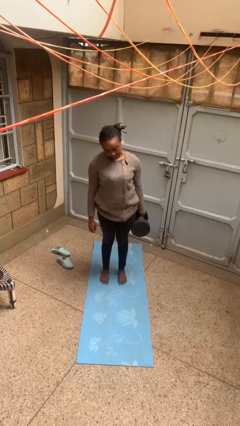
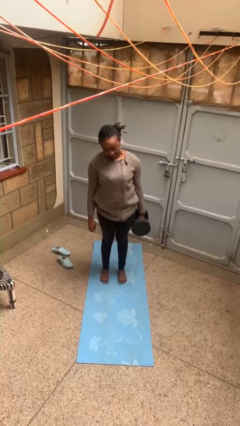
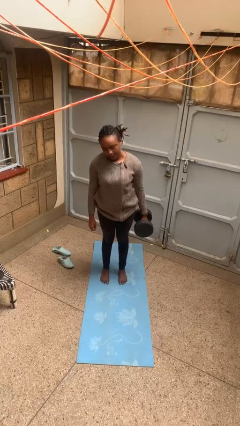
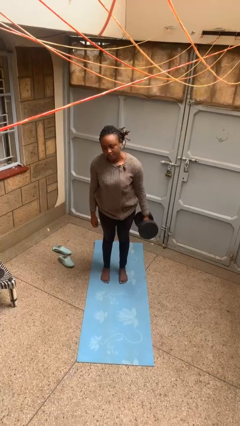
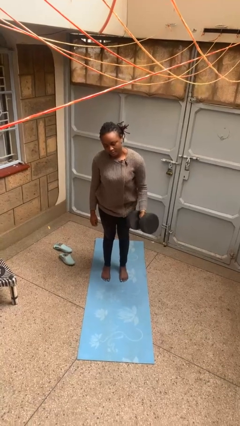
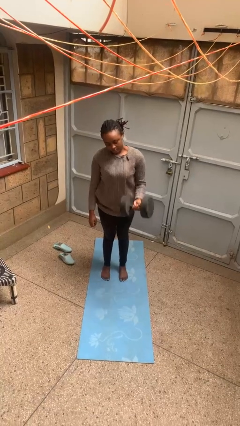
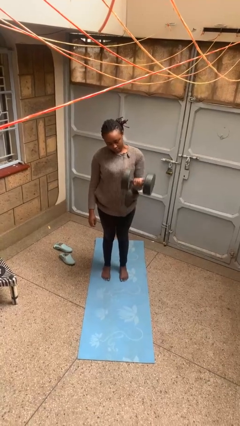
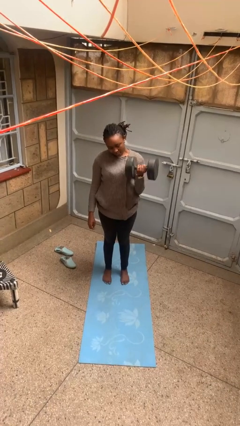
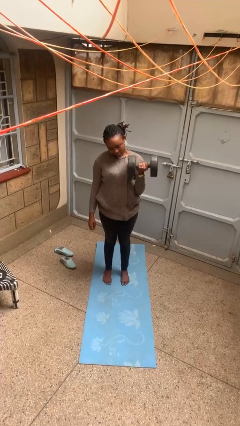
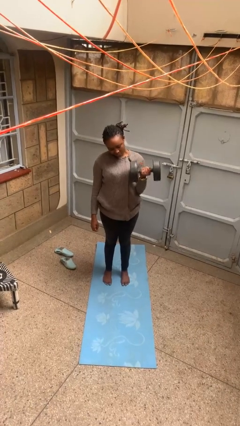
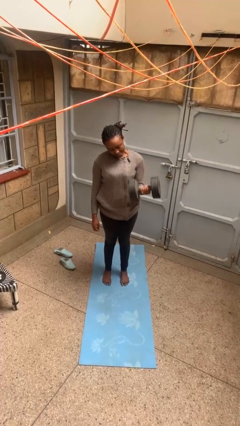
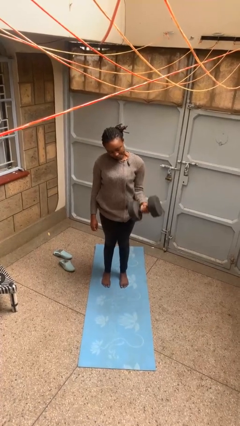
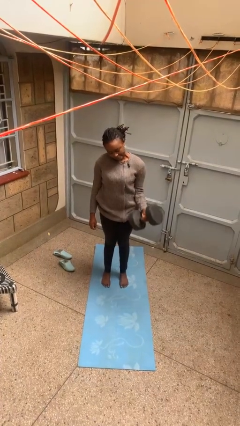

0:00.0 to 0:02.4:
person lifts dumbbells

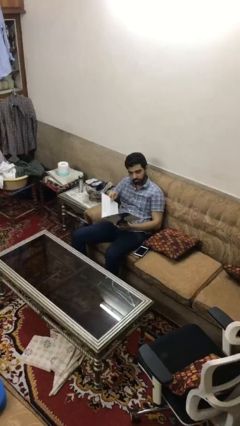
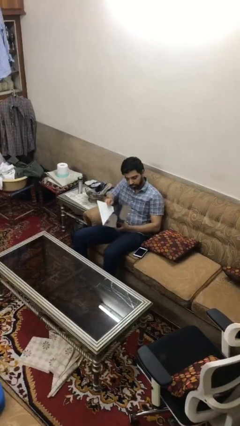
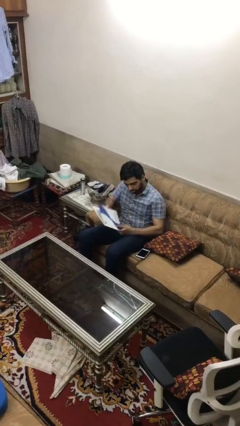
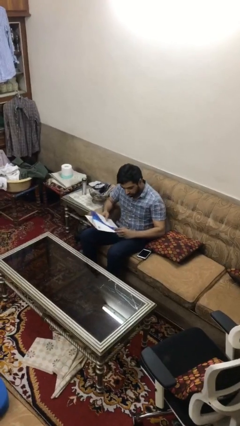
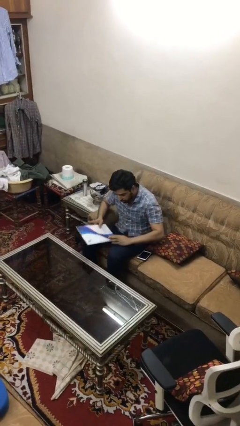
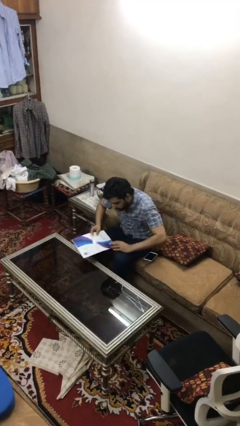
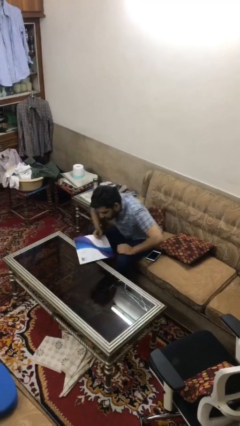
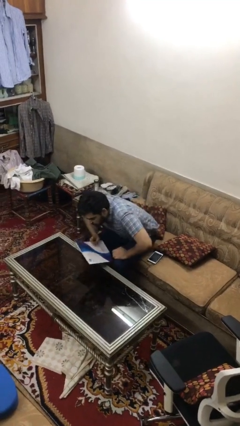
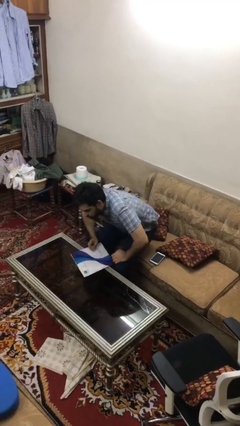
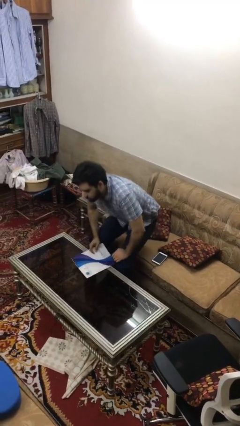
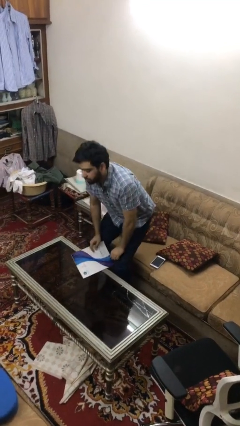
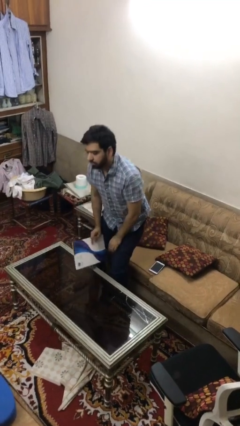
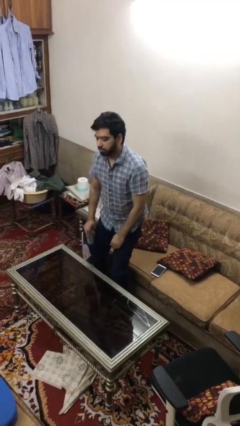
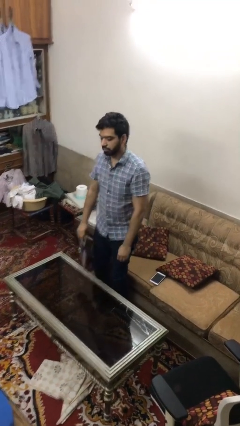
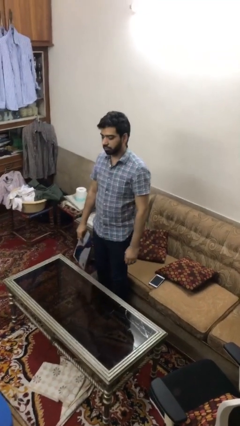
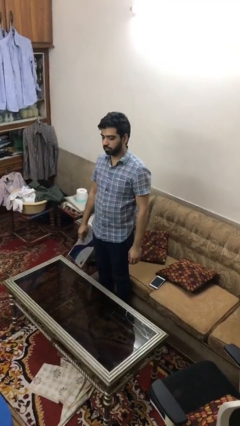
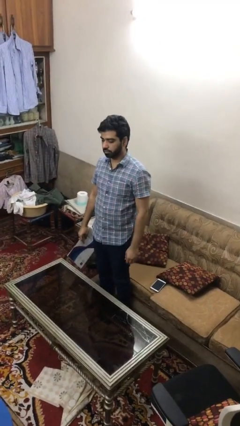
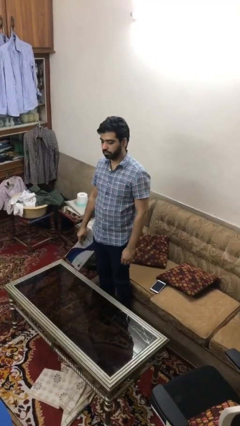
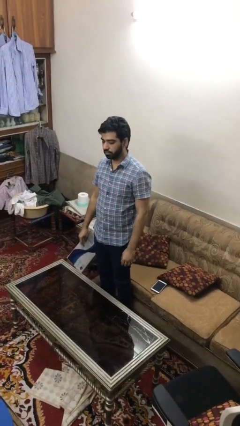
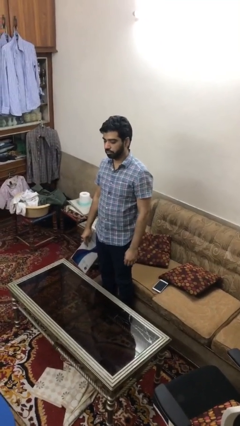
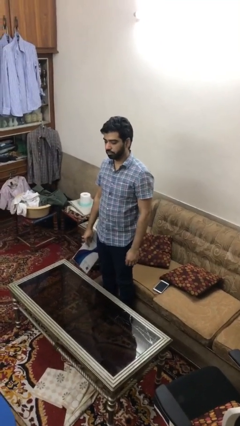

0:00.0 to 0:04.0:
person stands up

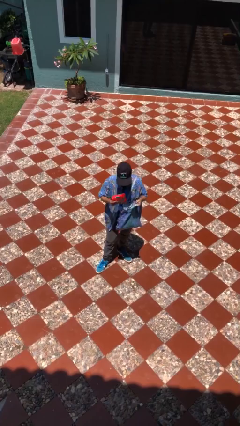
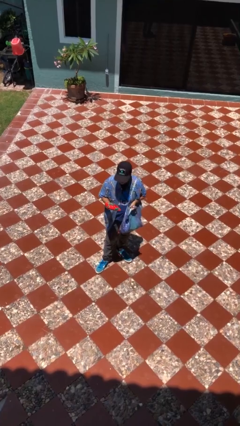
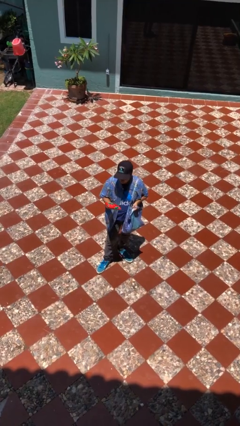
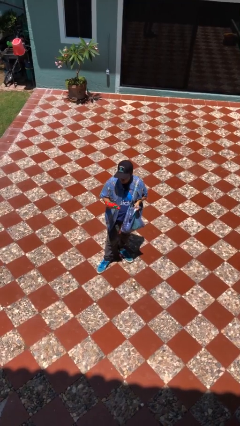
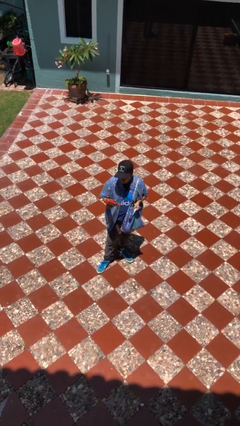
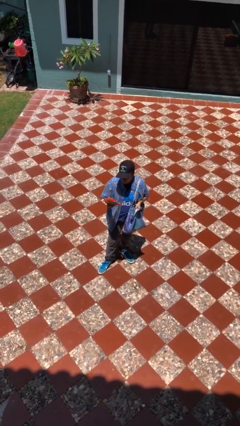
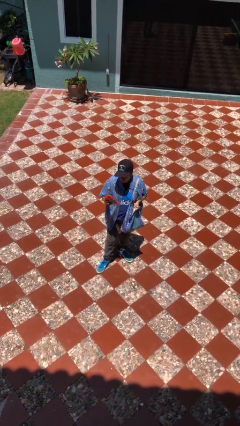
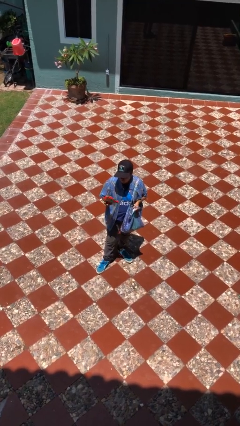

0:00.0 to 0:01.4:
person takes object from purse

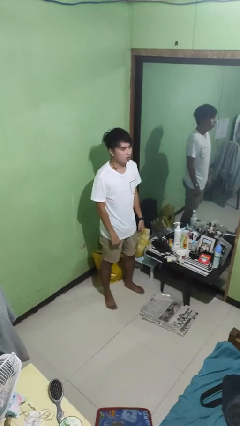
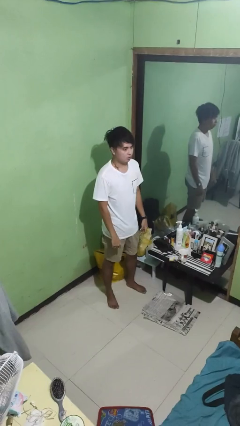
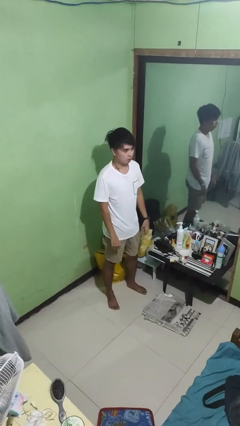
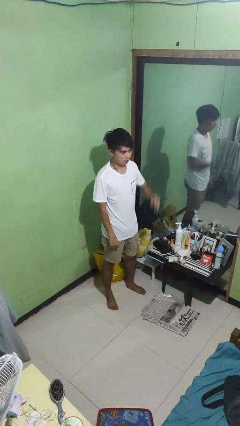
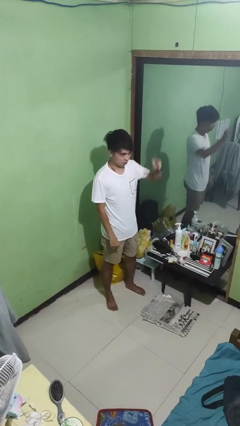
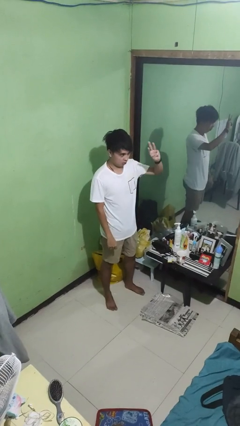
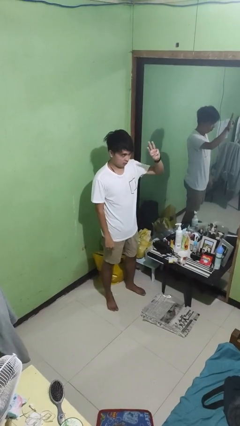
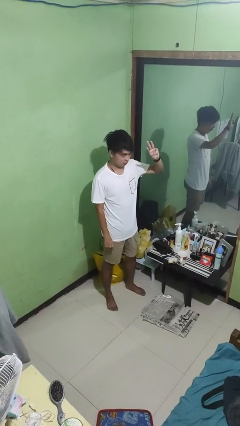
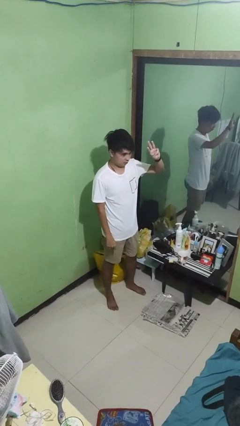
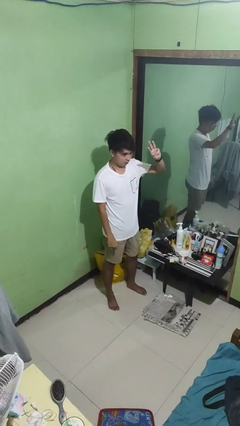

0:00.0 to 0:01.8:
person gestures number three

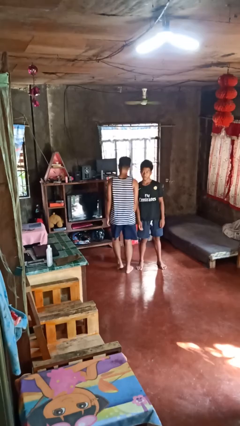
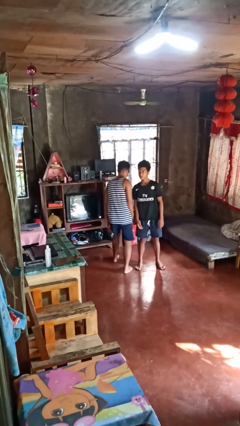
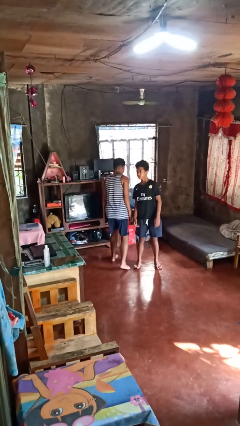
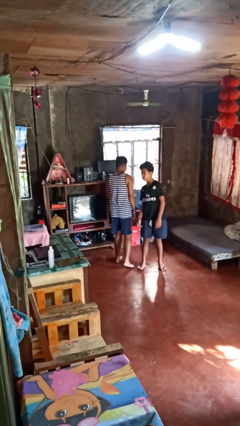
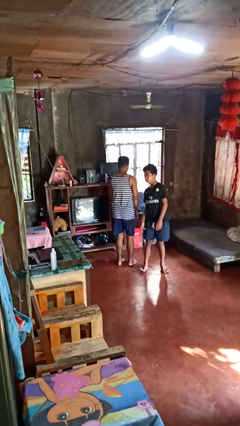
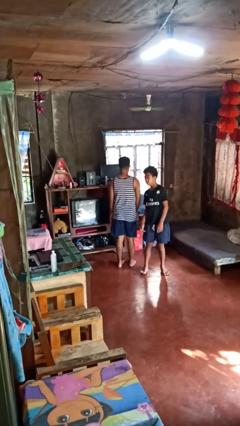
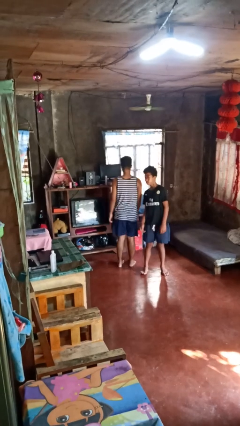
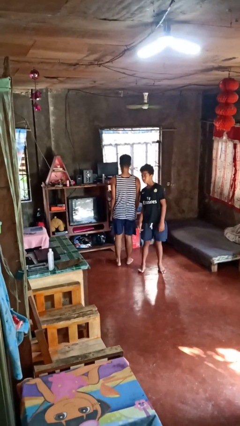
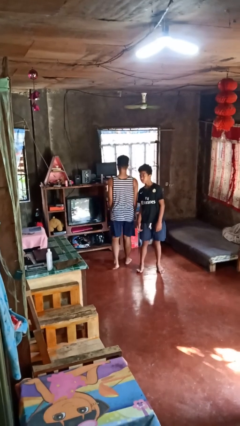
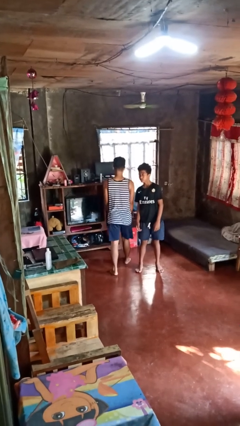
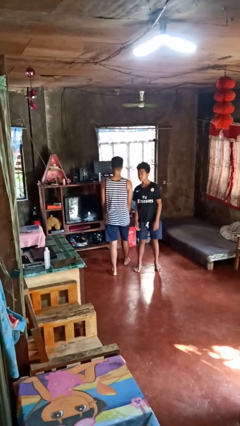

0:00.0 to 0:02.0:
person bumps into person

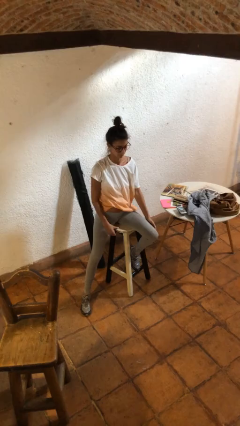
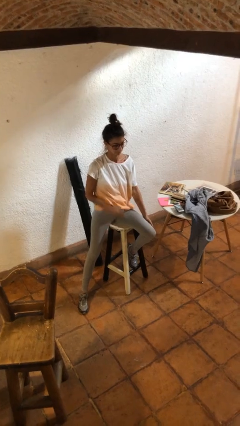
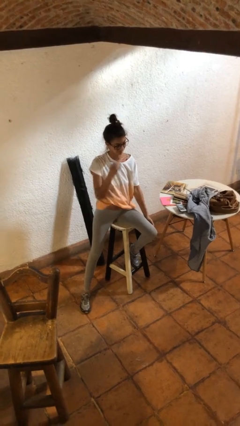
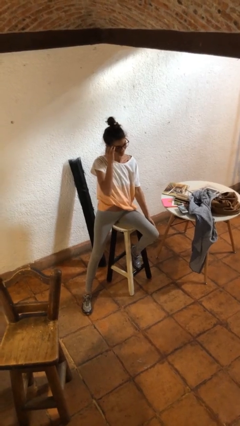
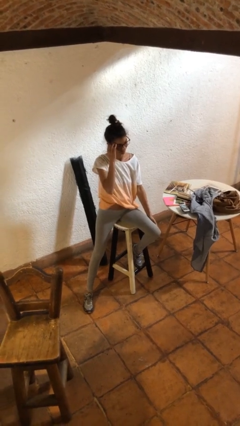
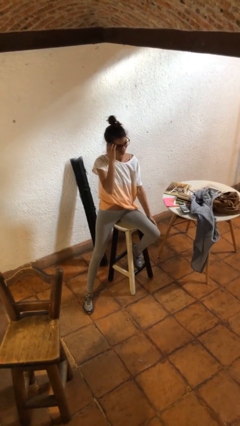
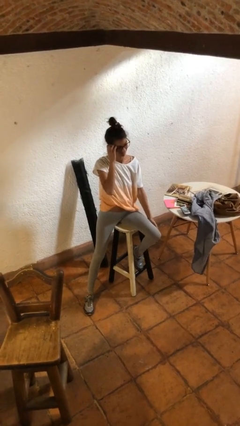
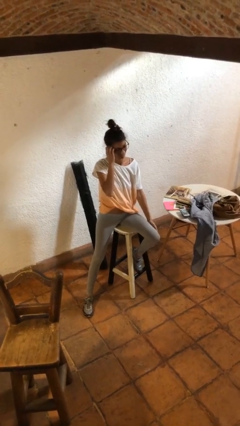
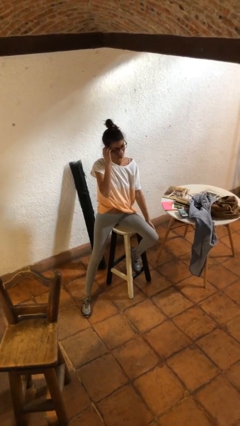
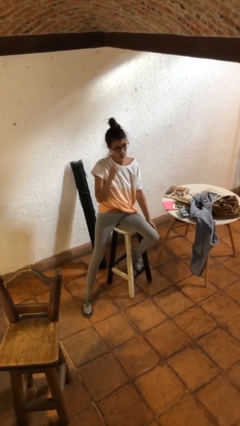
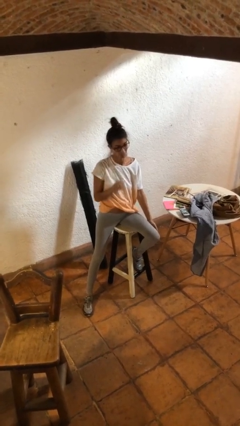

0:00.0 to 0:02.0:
person scratches face

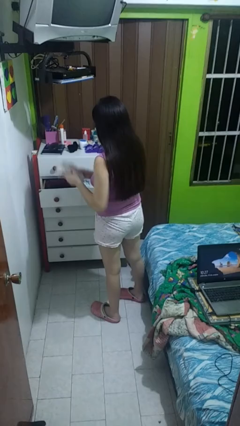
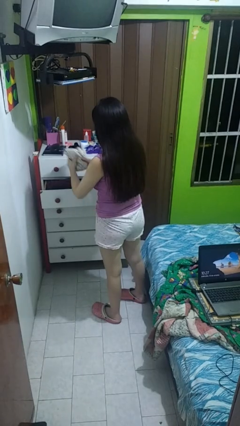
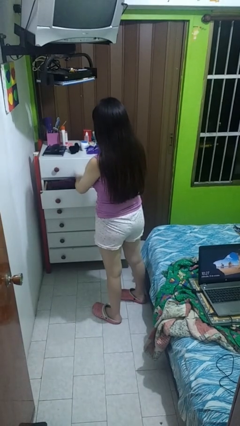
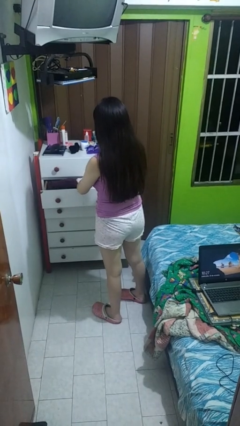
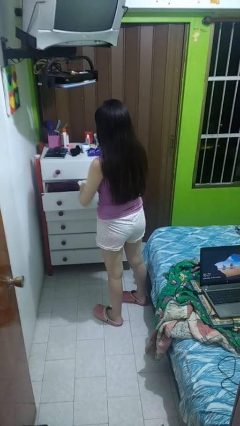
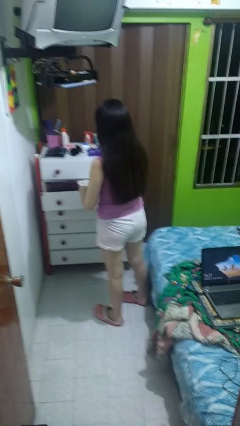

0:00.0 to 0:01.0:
person puts clothes into dresser

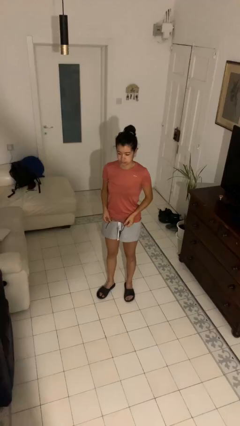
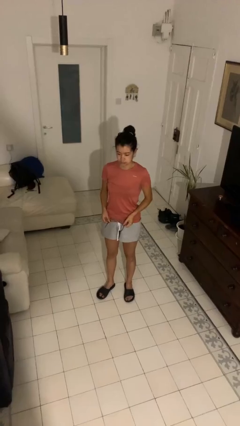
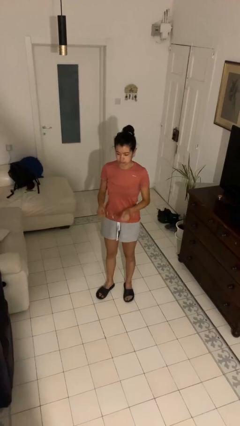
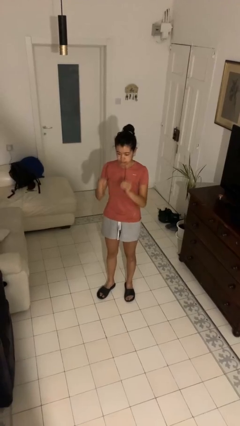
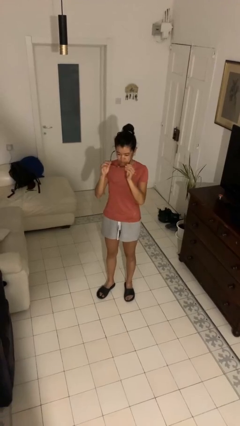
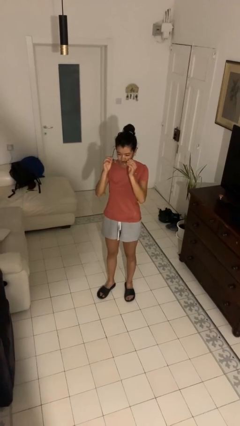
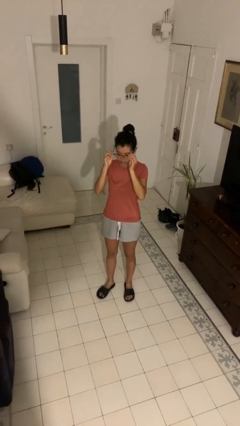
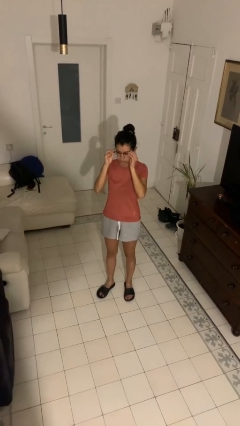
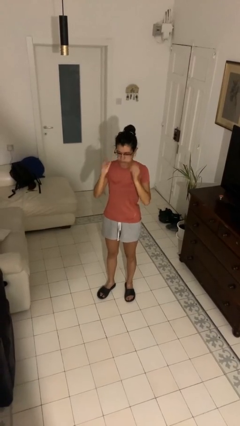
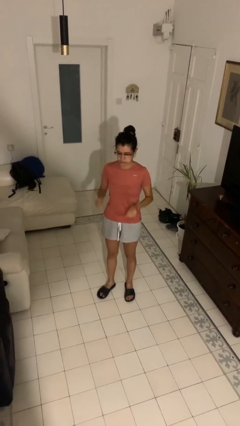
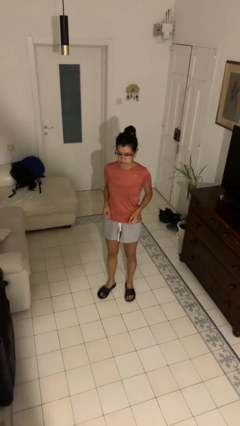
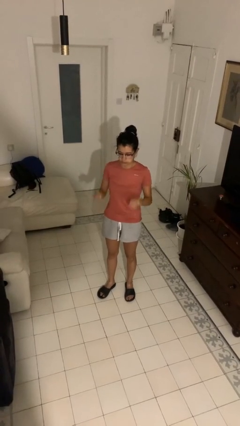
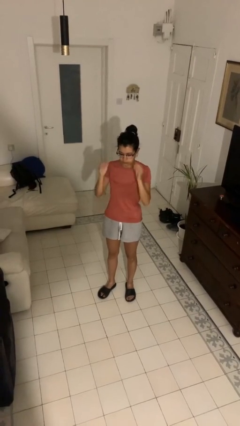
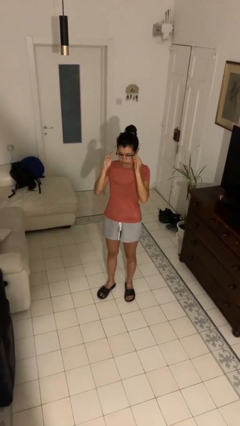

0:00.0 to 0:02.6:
person puts on glasses
